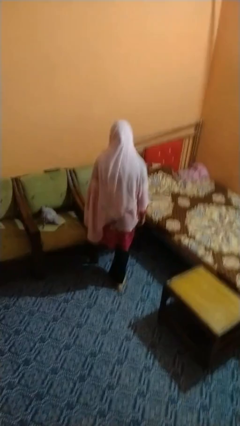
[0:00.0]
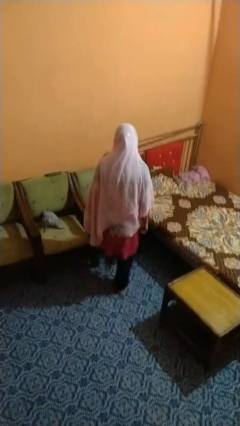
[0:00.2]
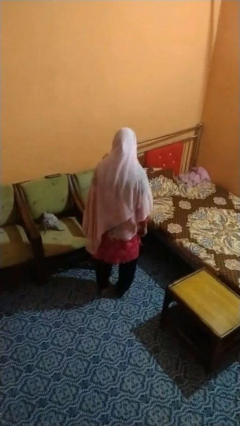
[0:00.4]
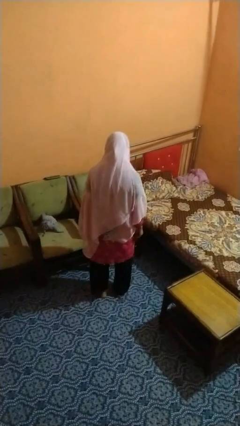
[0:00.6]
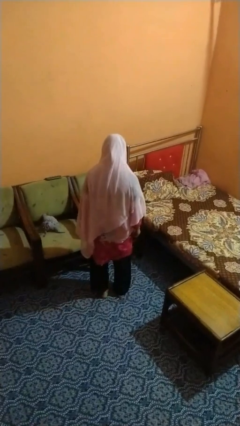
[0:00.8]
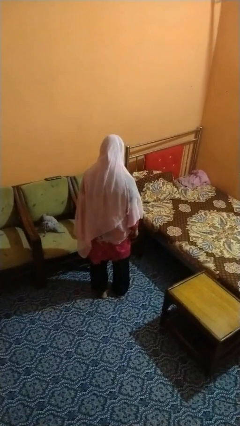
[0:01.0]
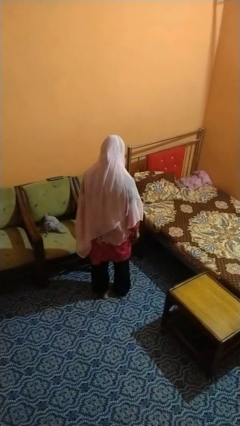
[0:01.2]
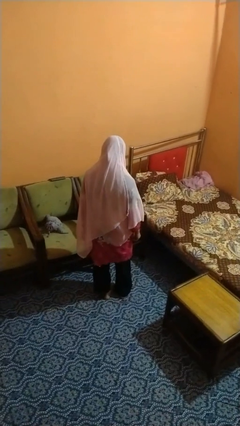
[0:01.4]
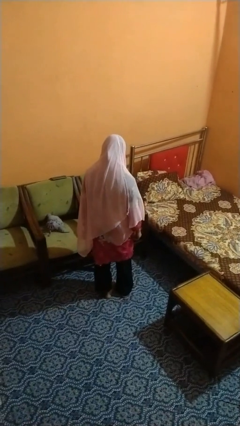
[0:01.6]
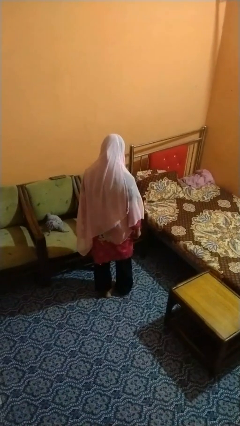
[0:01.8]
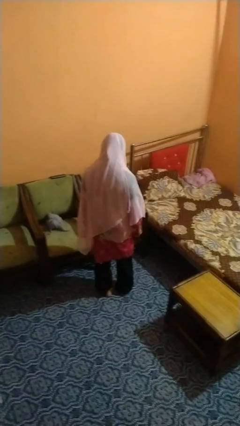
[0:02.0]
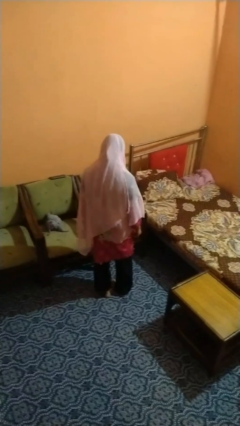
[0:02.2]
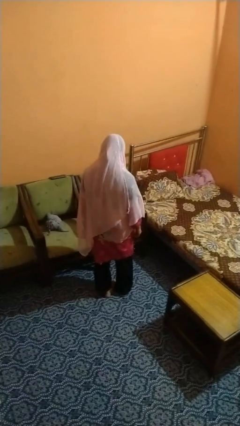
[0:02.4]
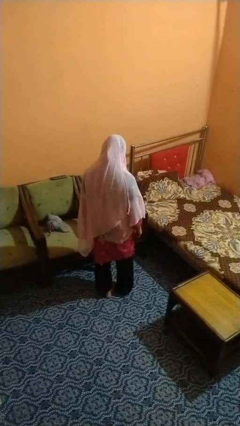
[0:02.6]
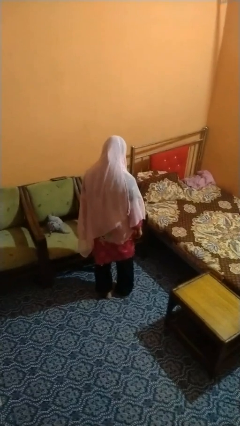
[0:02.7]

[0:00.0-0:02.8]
person climbs off chair

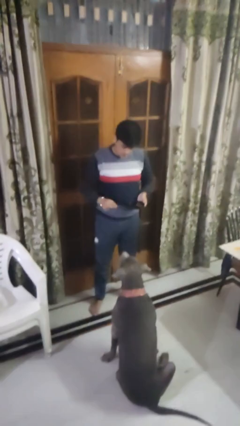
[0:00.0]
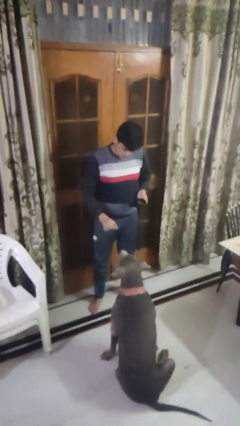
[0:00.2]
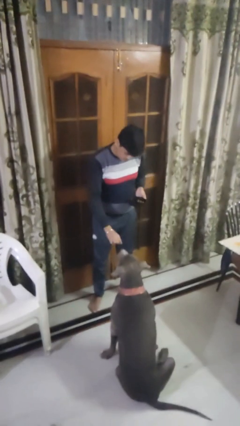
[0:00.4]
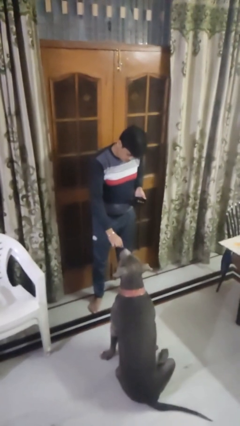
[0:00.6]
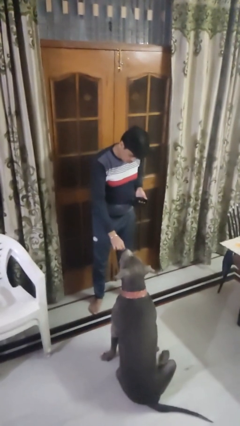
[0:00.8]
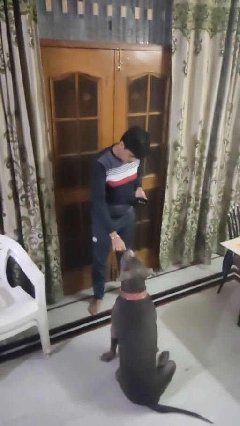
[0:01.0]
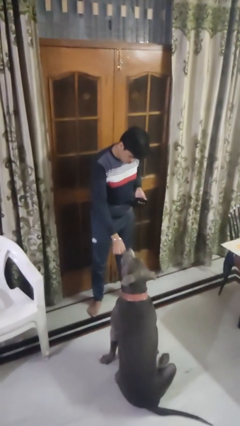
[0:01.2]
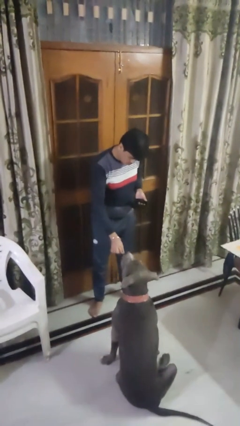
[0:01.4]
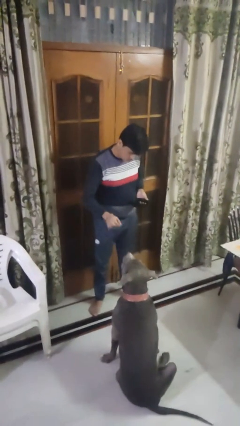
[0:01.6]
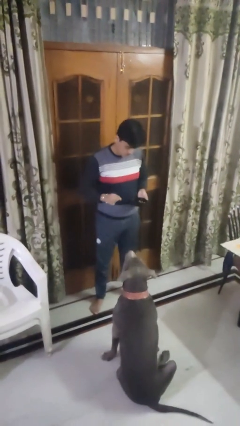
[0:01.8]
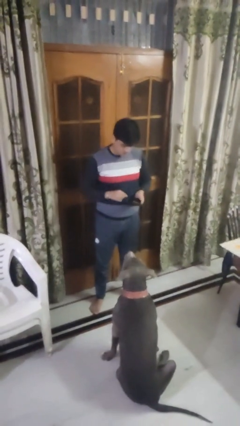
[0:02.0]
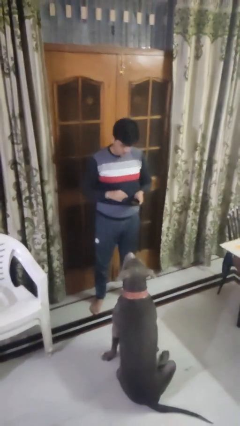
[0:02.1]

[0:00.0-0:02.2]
person feeds dog

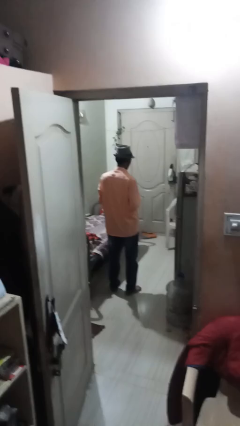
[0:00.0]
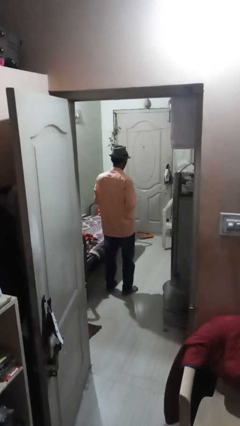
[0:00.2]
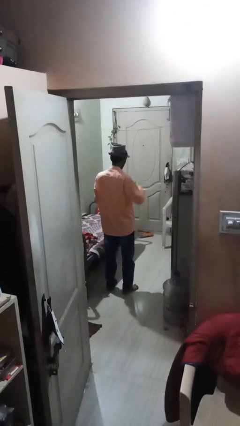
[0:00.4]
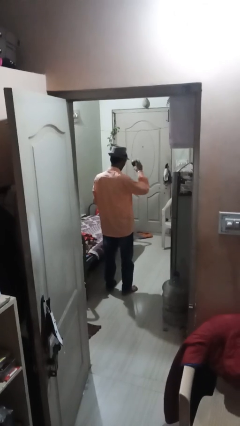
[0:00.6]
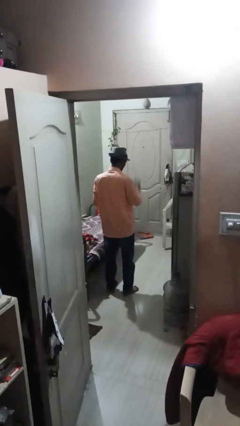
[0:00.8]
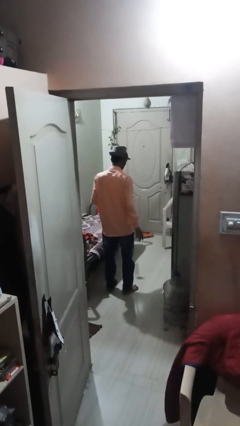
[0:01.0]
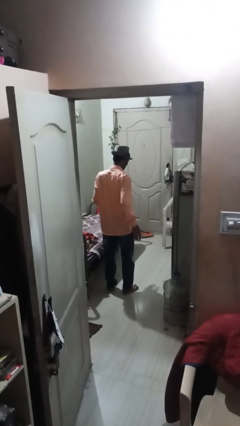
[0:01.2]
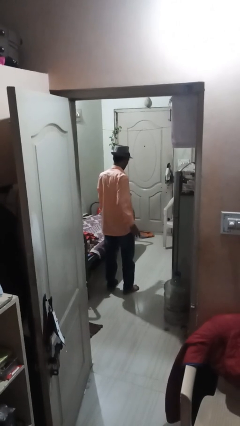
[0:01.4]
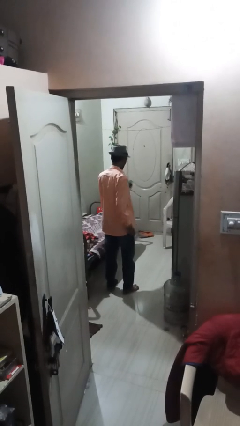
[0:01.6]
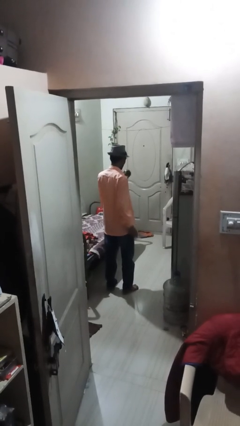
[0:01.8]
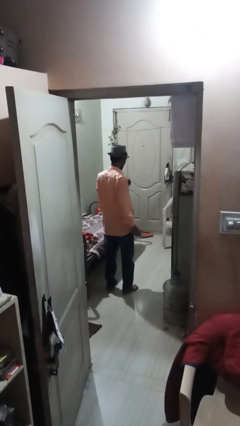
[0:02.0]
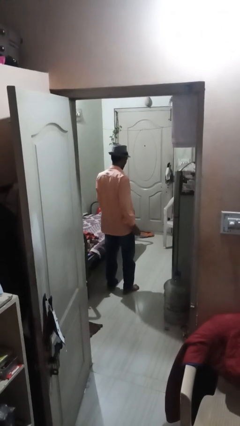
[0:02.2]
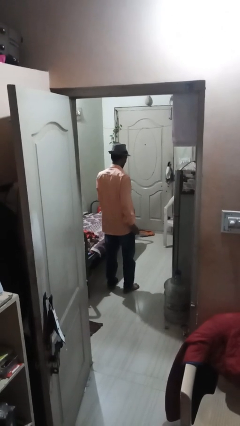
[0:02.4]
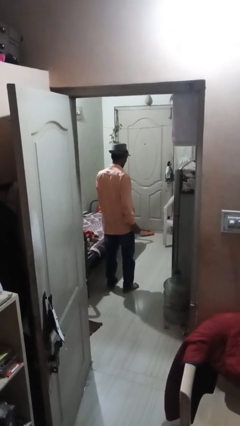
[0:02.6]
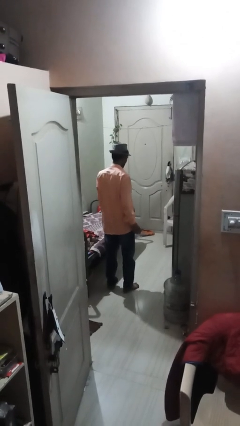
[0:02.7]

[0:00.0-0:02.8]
person bounces ball on floor

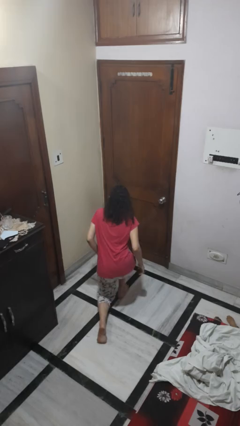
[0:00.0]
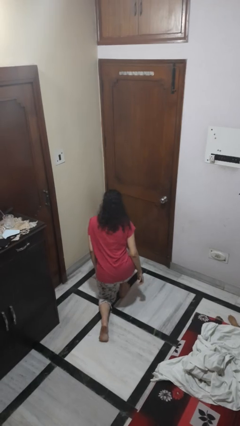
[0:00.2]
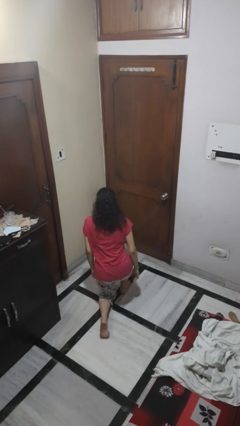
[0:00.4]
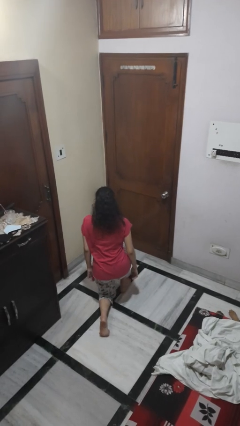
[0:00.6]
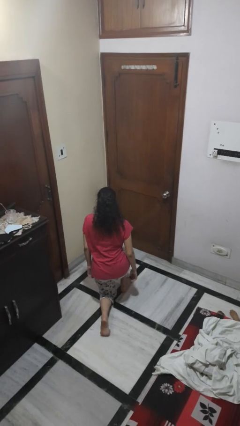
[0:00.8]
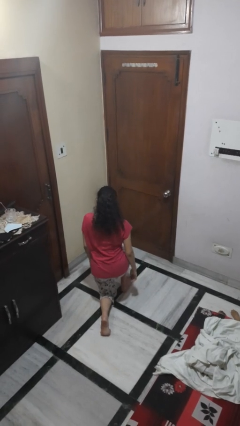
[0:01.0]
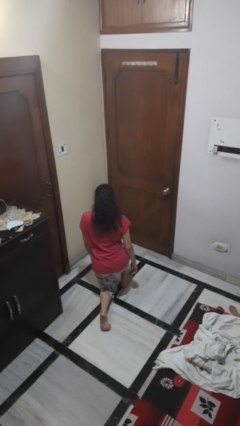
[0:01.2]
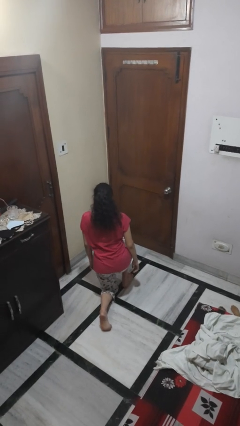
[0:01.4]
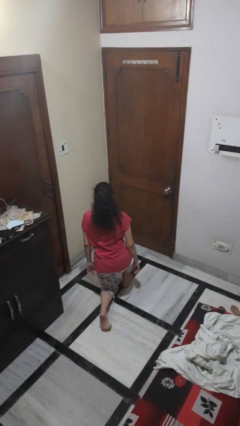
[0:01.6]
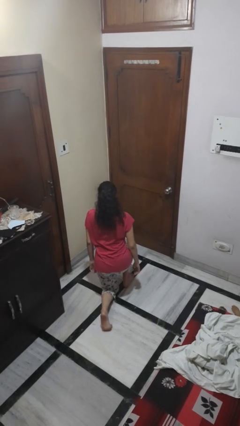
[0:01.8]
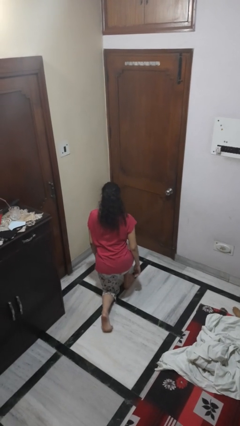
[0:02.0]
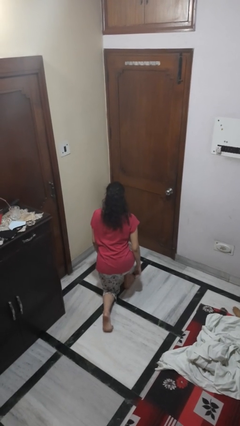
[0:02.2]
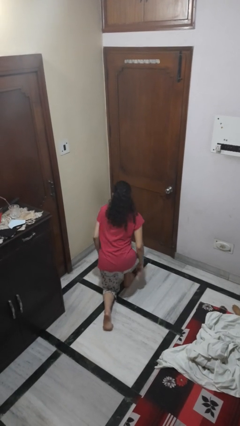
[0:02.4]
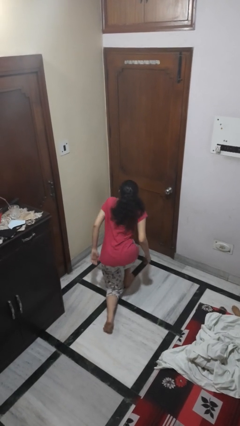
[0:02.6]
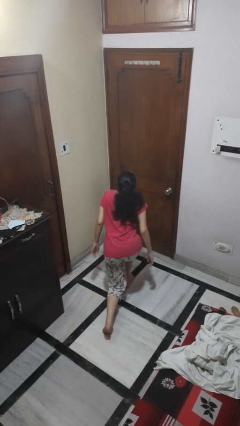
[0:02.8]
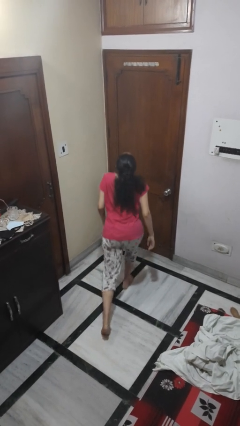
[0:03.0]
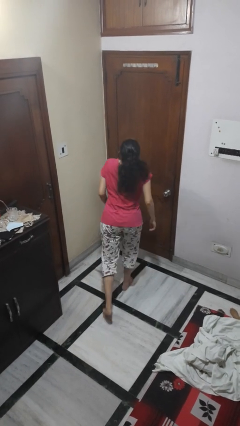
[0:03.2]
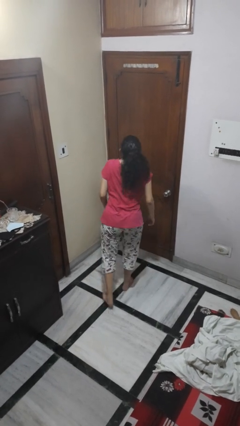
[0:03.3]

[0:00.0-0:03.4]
person kneels

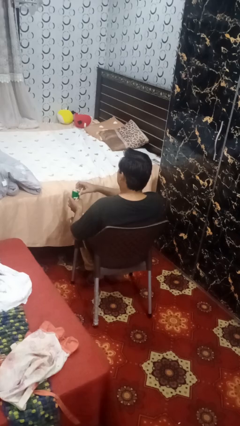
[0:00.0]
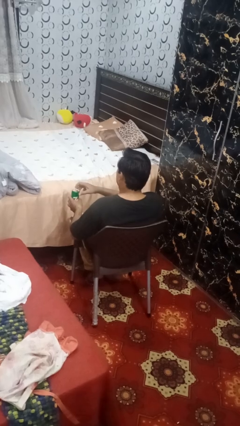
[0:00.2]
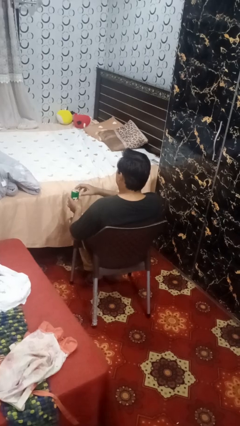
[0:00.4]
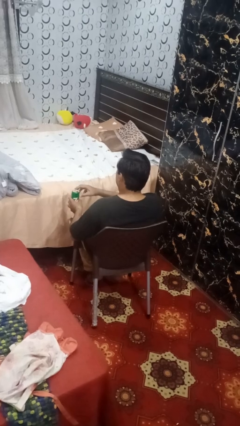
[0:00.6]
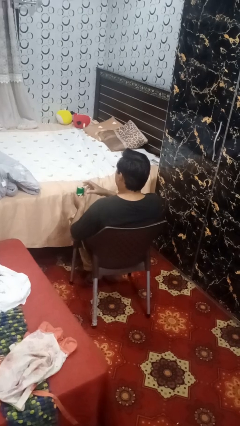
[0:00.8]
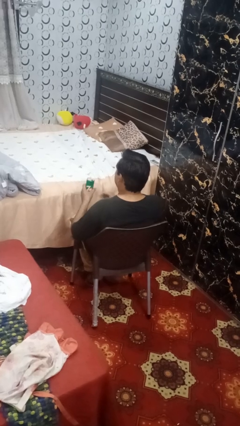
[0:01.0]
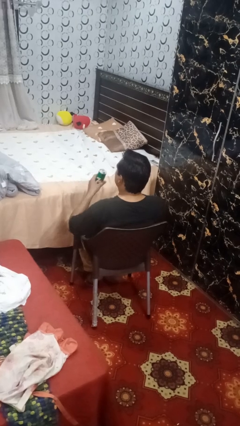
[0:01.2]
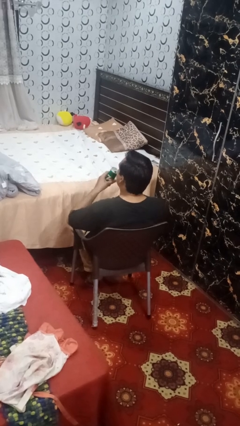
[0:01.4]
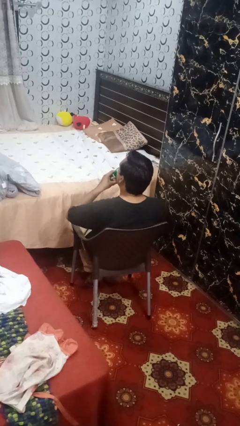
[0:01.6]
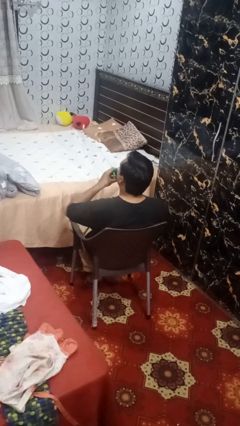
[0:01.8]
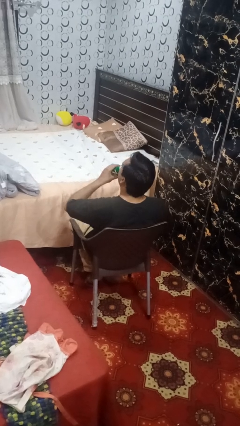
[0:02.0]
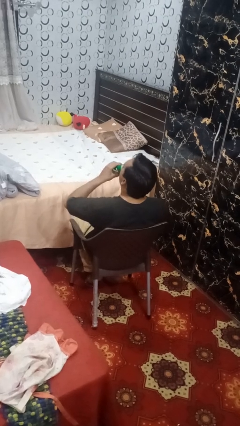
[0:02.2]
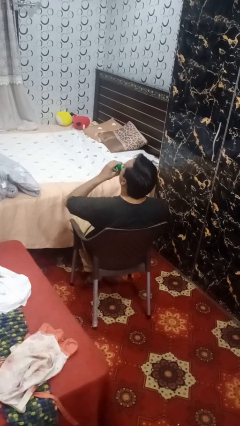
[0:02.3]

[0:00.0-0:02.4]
person drinks from beverage can

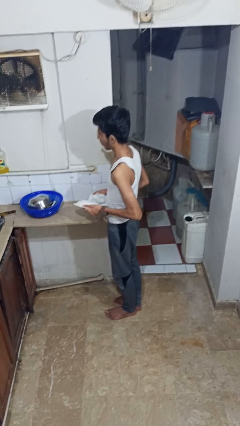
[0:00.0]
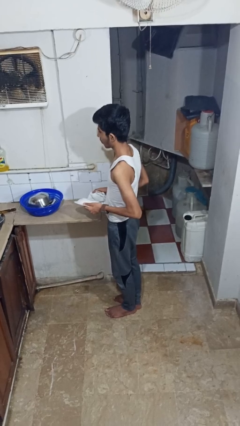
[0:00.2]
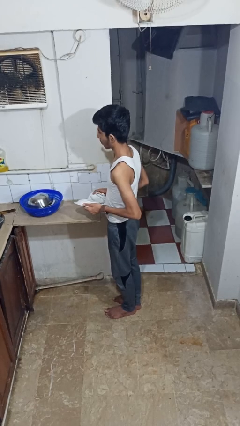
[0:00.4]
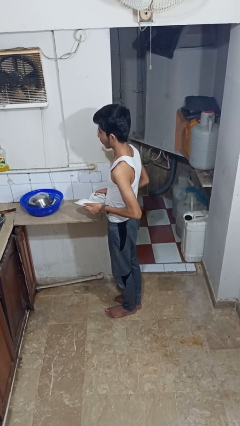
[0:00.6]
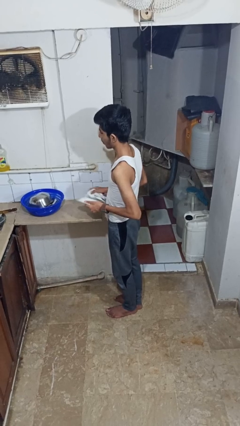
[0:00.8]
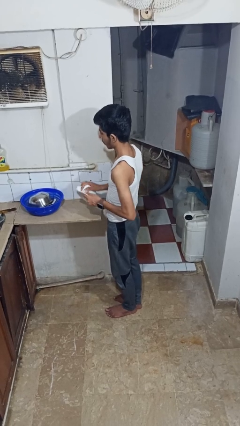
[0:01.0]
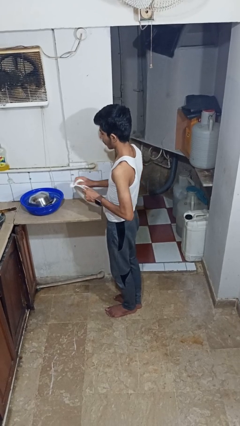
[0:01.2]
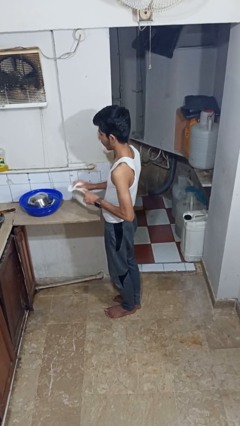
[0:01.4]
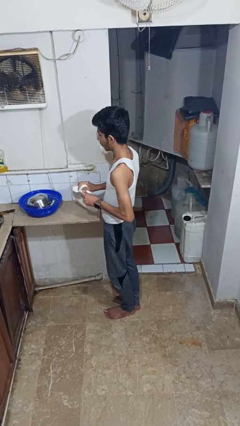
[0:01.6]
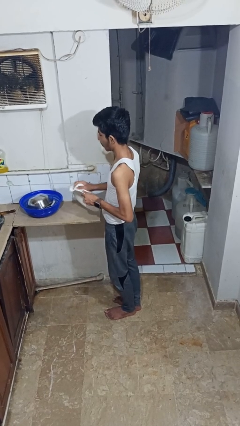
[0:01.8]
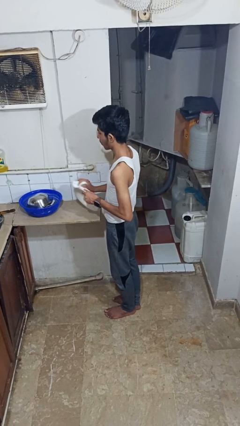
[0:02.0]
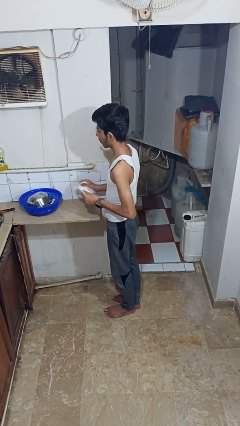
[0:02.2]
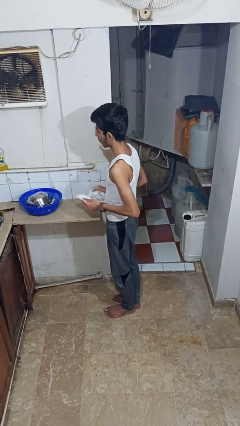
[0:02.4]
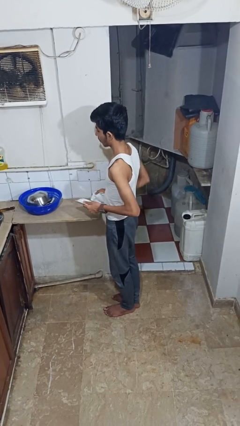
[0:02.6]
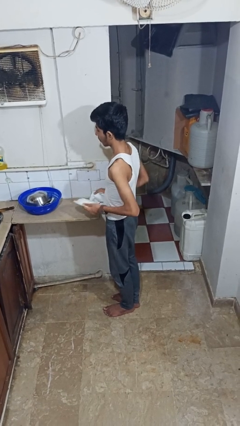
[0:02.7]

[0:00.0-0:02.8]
person dries dish
